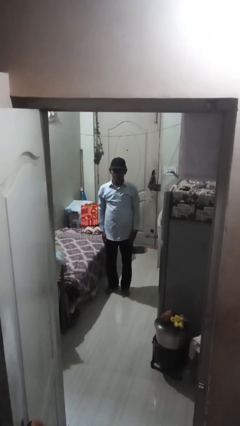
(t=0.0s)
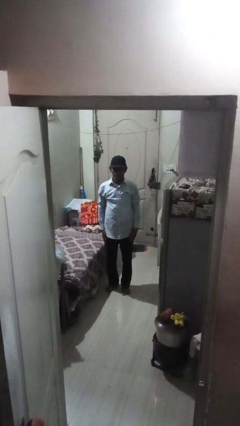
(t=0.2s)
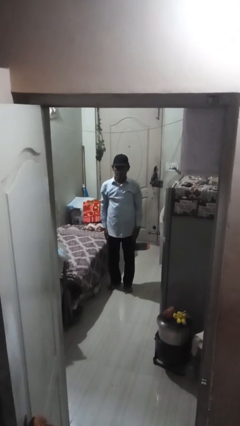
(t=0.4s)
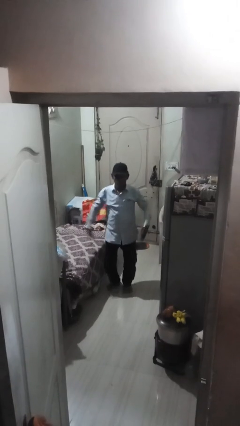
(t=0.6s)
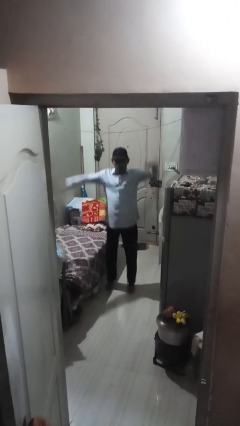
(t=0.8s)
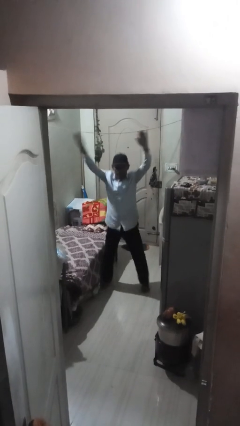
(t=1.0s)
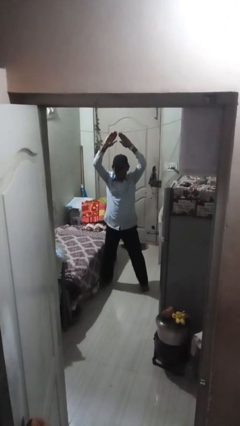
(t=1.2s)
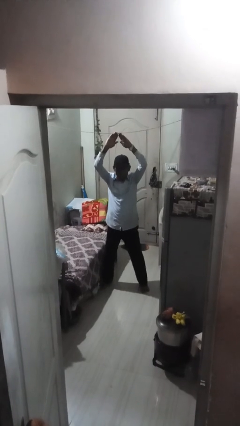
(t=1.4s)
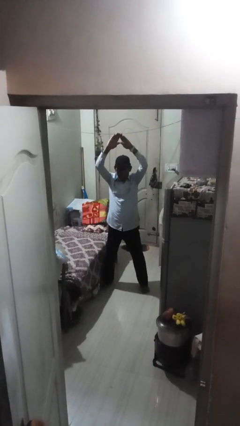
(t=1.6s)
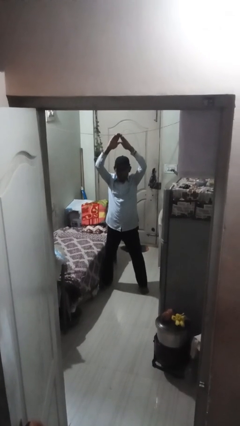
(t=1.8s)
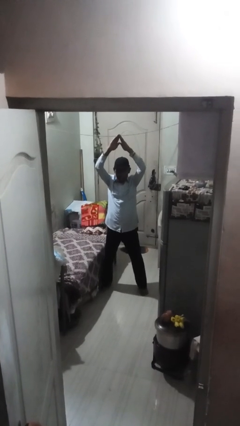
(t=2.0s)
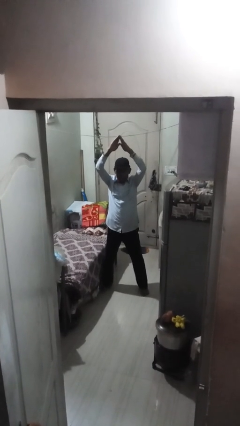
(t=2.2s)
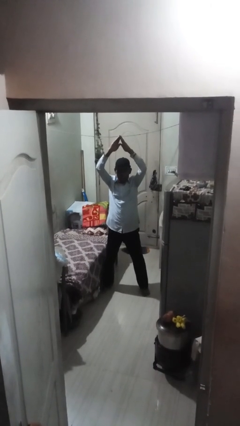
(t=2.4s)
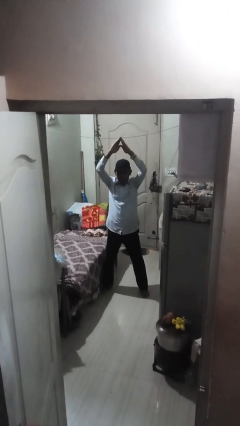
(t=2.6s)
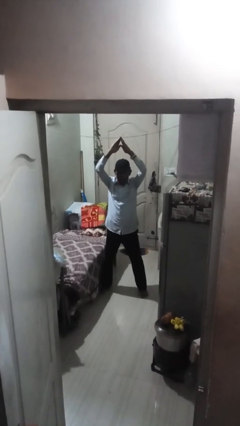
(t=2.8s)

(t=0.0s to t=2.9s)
person exercises with jumping jacks

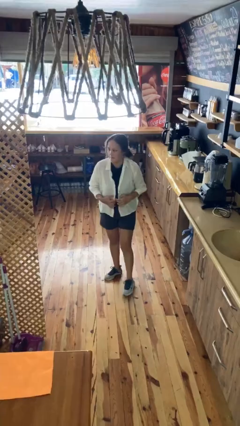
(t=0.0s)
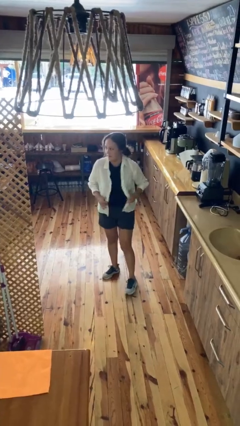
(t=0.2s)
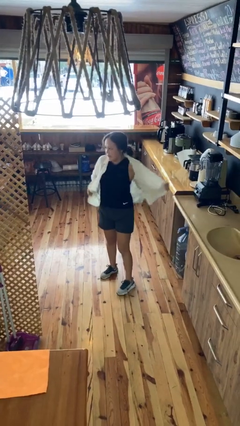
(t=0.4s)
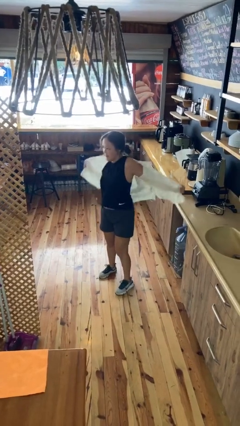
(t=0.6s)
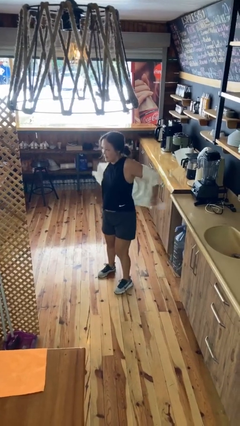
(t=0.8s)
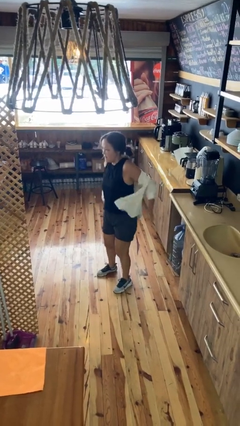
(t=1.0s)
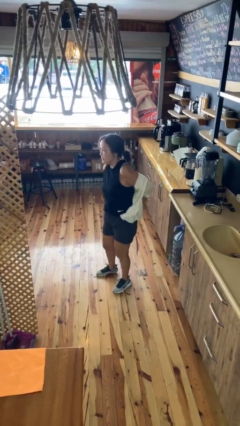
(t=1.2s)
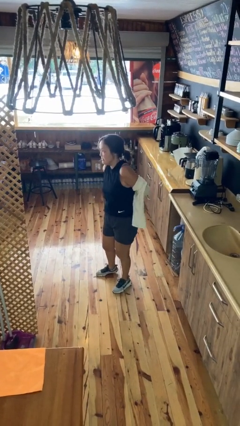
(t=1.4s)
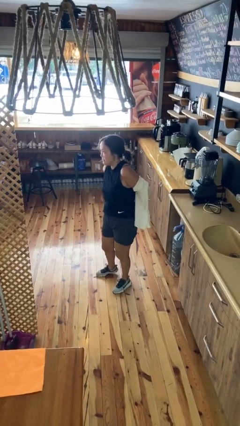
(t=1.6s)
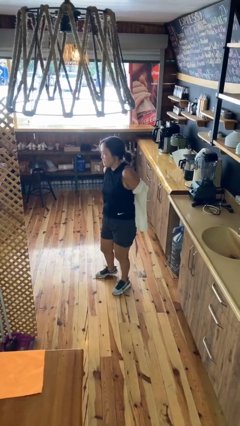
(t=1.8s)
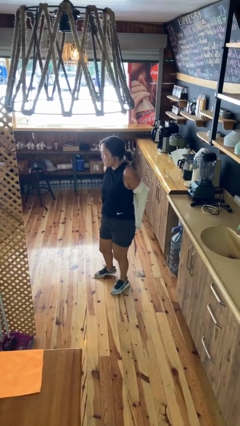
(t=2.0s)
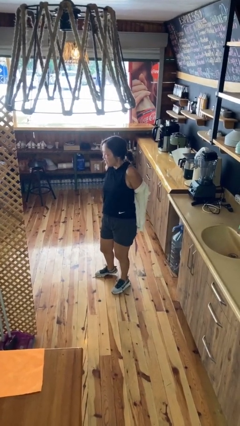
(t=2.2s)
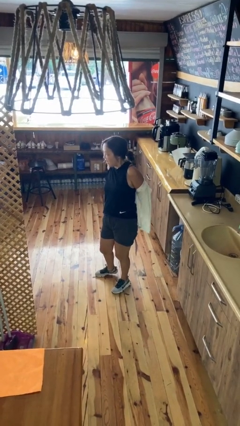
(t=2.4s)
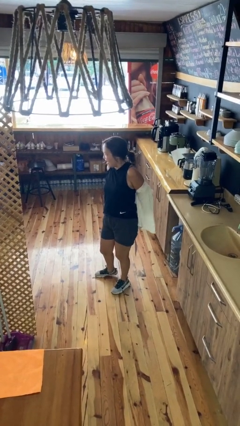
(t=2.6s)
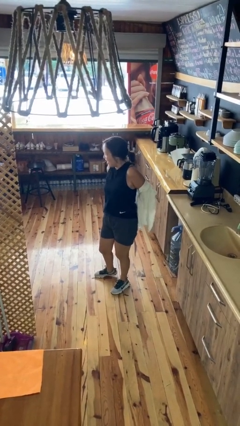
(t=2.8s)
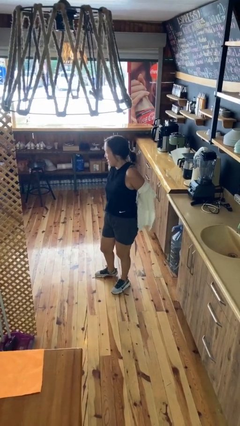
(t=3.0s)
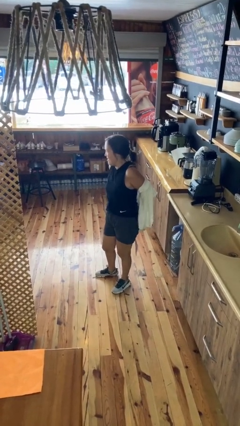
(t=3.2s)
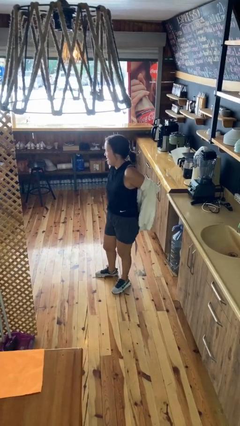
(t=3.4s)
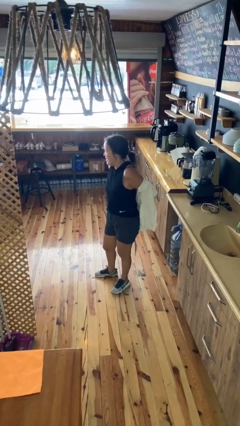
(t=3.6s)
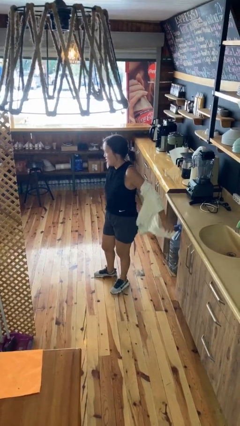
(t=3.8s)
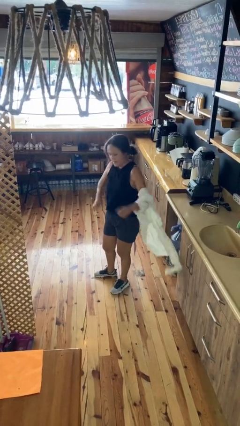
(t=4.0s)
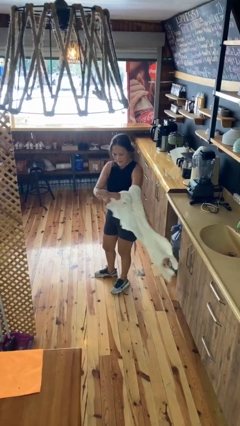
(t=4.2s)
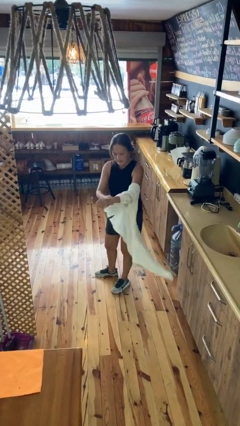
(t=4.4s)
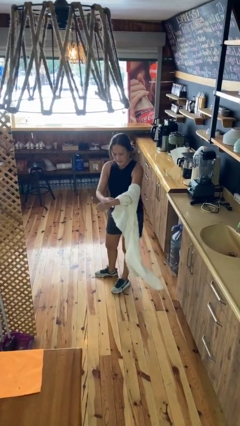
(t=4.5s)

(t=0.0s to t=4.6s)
person takes off shirt

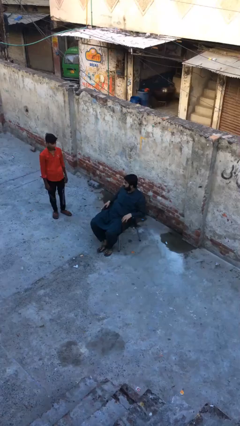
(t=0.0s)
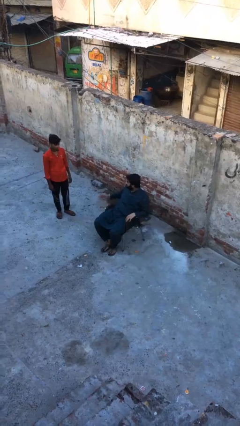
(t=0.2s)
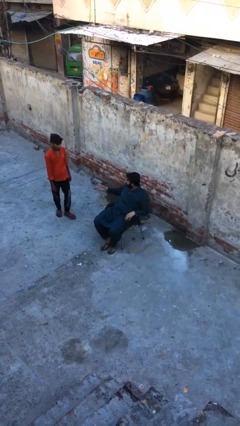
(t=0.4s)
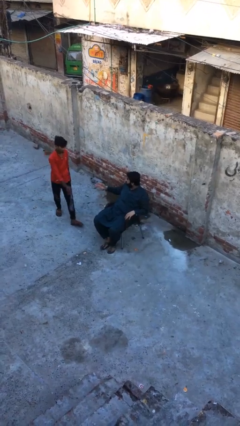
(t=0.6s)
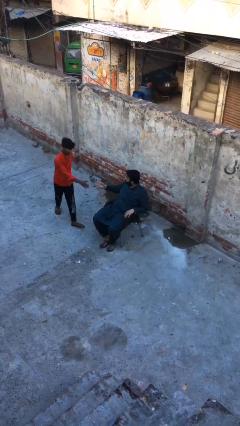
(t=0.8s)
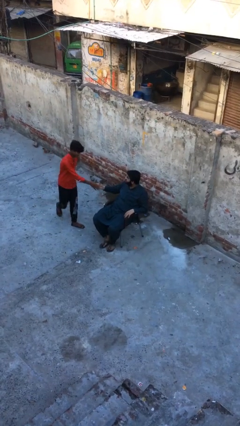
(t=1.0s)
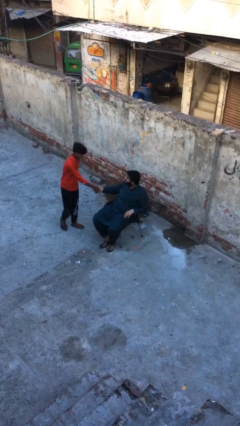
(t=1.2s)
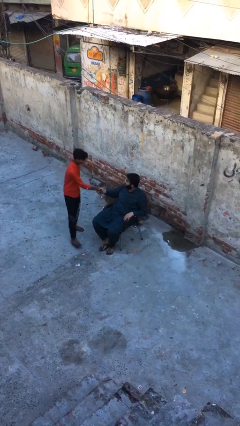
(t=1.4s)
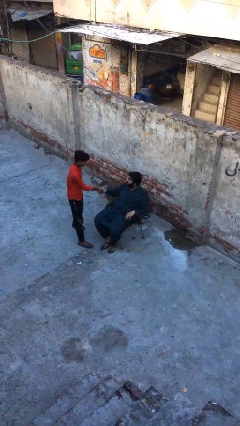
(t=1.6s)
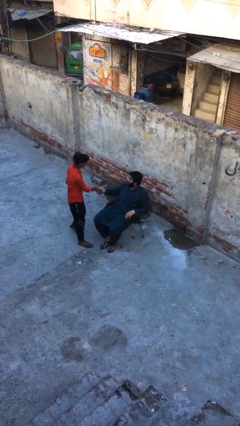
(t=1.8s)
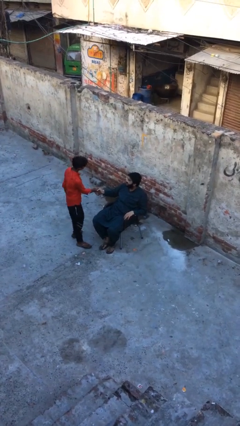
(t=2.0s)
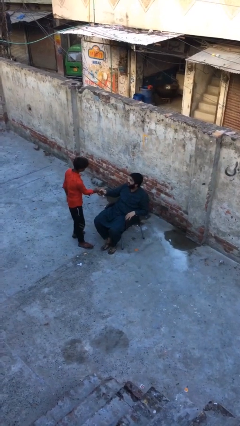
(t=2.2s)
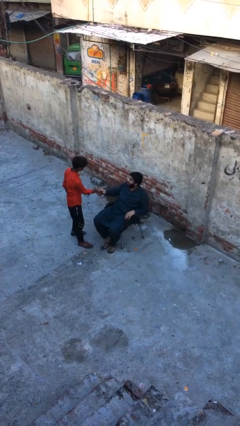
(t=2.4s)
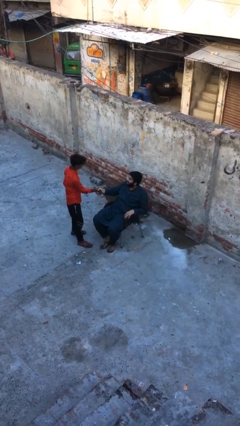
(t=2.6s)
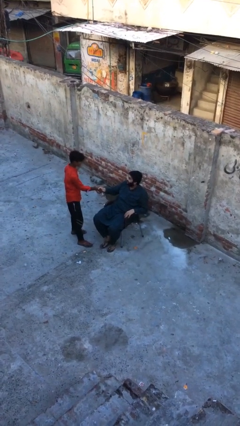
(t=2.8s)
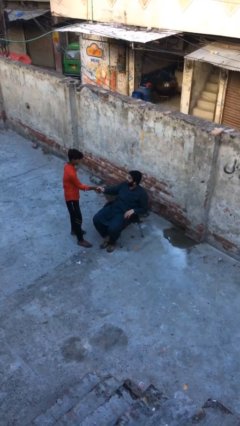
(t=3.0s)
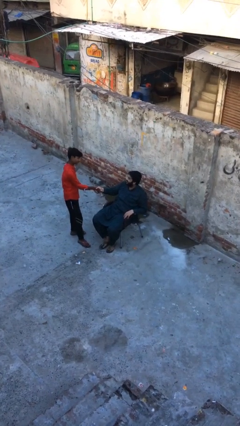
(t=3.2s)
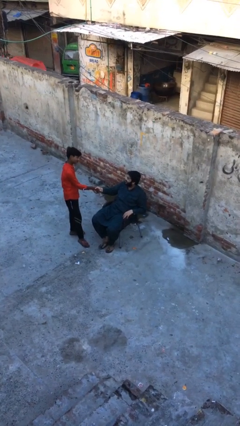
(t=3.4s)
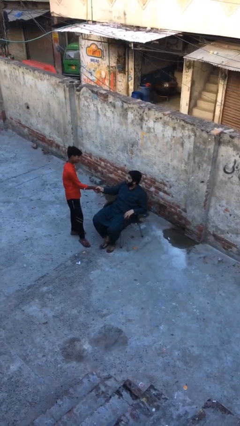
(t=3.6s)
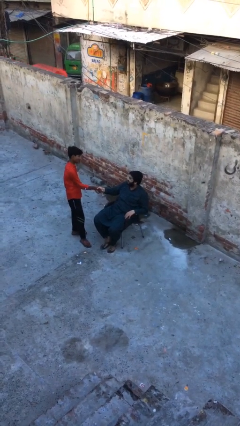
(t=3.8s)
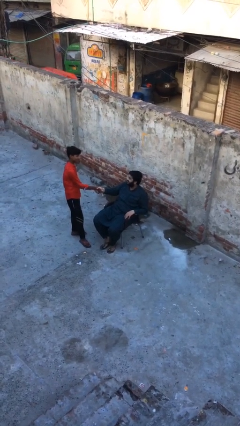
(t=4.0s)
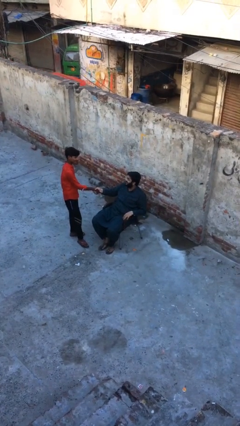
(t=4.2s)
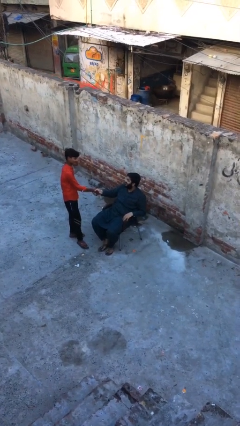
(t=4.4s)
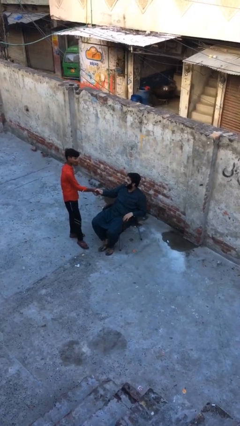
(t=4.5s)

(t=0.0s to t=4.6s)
person shakes hand

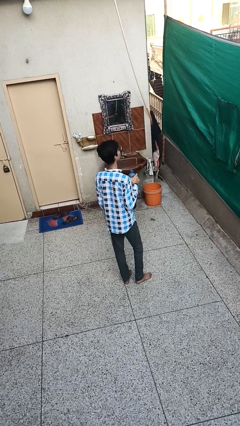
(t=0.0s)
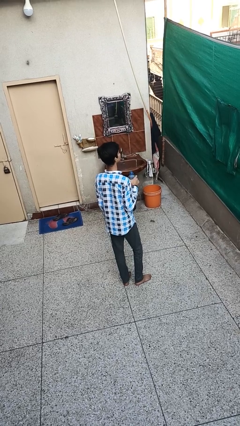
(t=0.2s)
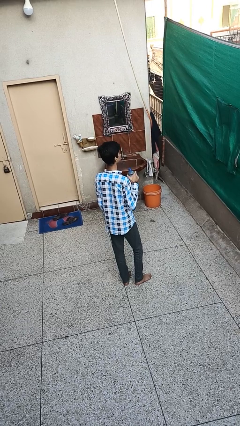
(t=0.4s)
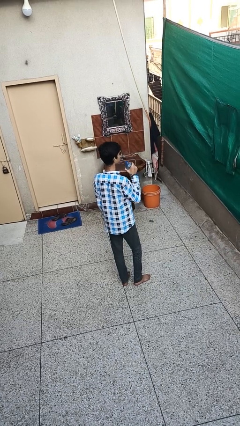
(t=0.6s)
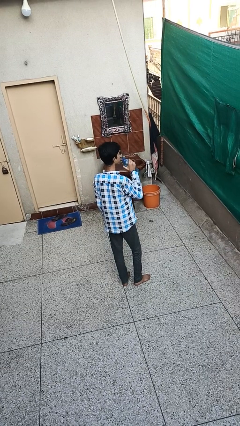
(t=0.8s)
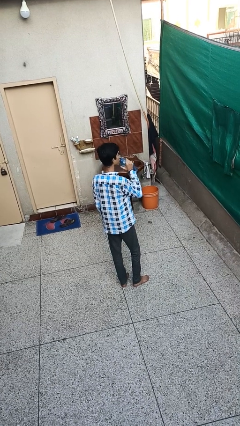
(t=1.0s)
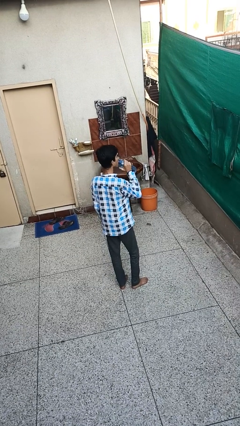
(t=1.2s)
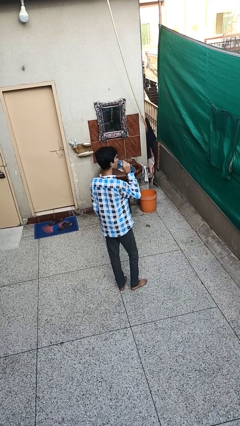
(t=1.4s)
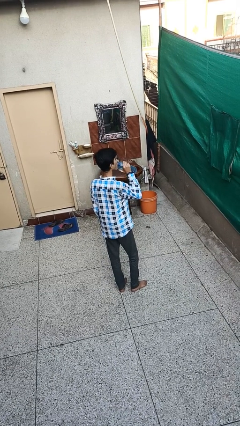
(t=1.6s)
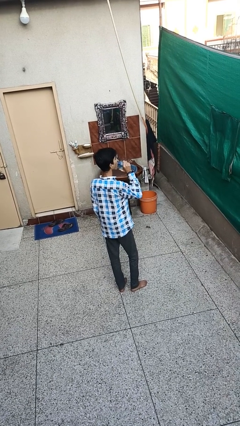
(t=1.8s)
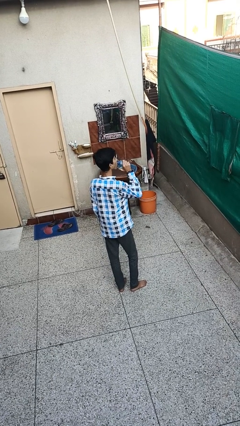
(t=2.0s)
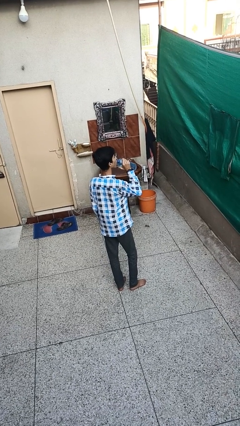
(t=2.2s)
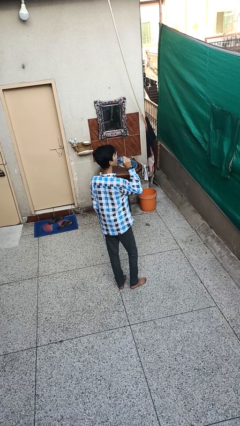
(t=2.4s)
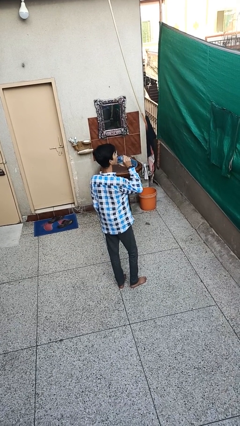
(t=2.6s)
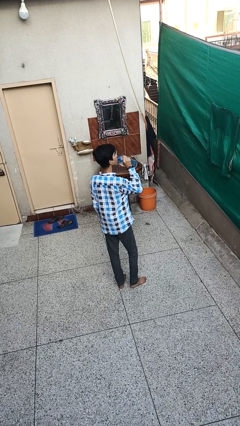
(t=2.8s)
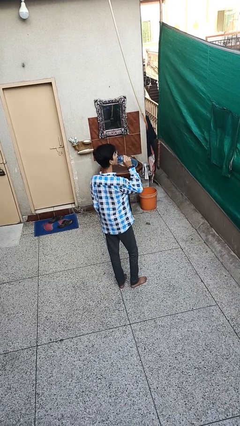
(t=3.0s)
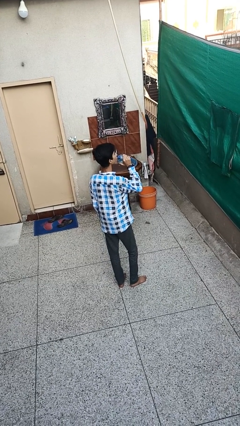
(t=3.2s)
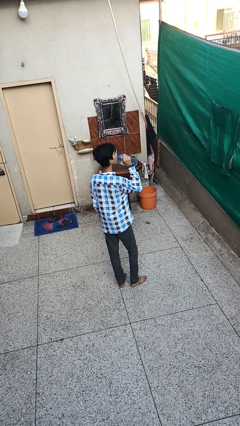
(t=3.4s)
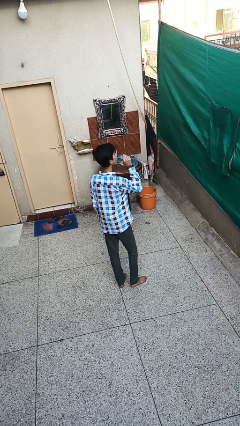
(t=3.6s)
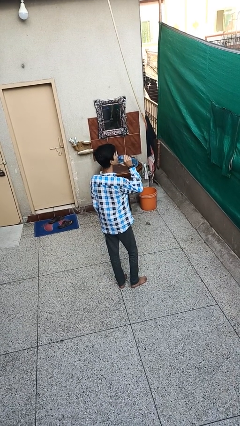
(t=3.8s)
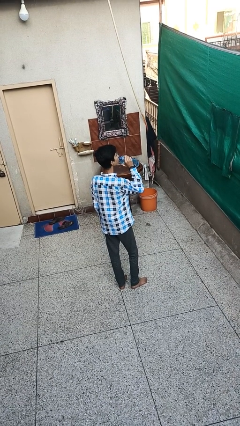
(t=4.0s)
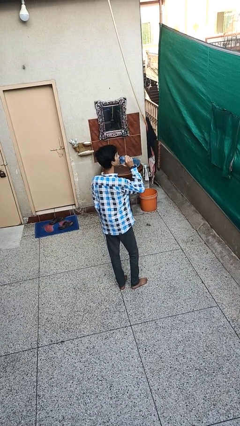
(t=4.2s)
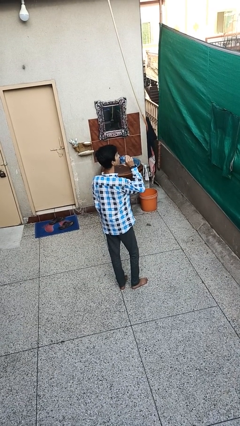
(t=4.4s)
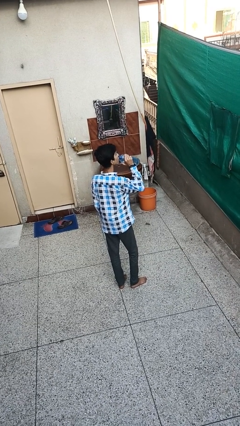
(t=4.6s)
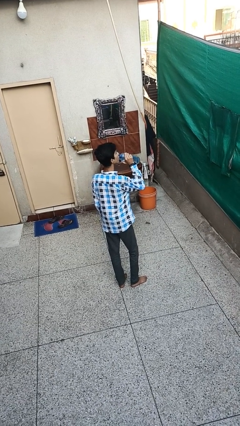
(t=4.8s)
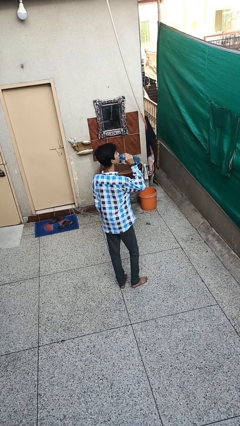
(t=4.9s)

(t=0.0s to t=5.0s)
person drinks from bottle

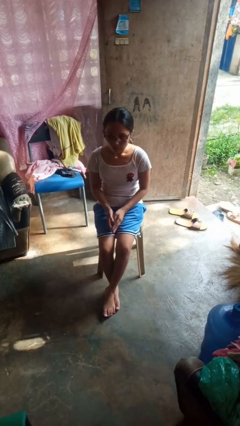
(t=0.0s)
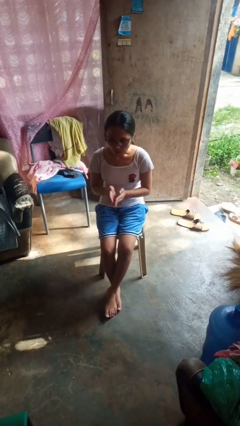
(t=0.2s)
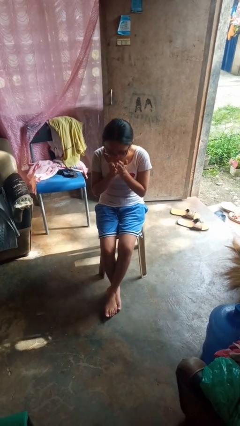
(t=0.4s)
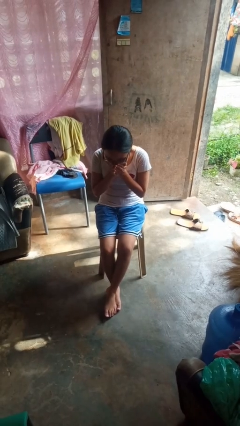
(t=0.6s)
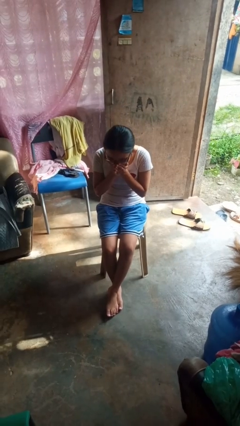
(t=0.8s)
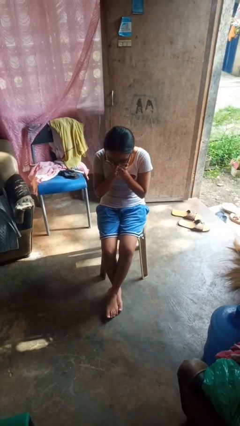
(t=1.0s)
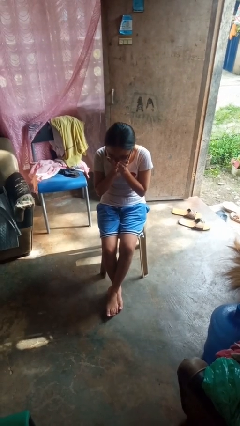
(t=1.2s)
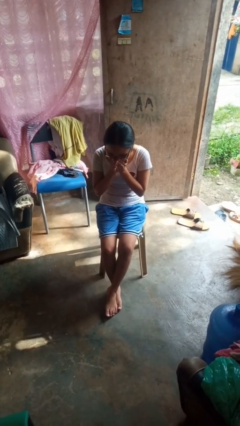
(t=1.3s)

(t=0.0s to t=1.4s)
person sneezes into hand
